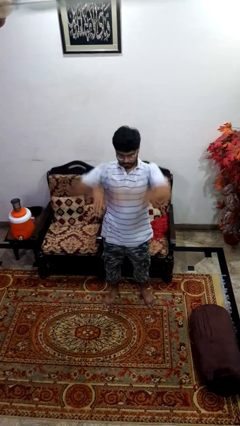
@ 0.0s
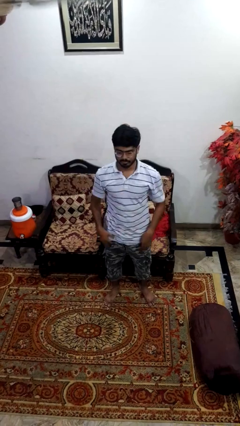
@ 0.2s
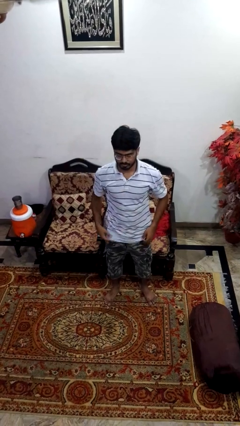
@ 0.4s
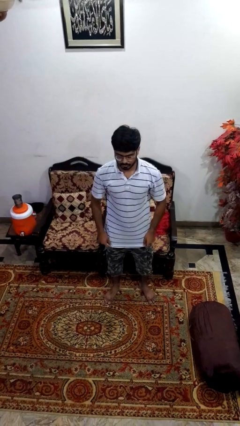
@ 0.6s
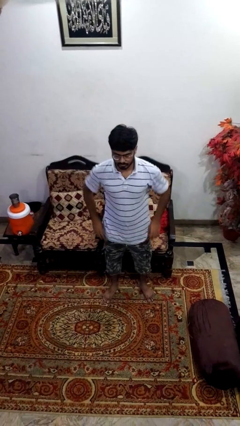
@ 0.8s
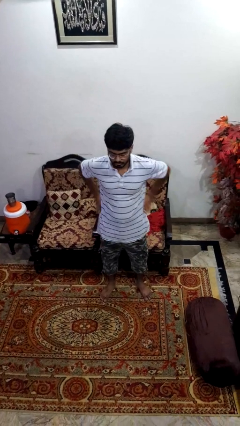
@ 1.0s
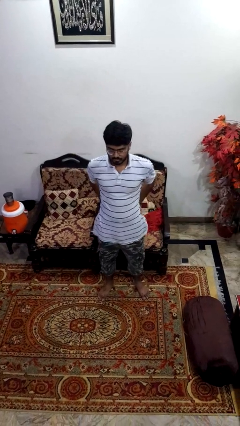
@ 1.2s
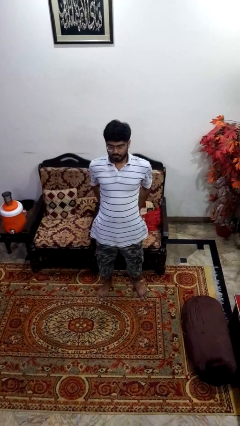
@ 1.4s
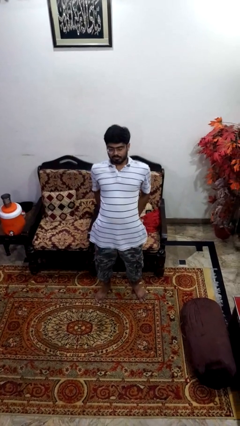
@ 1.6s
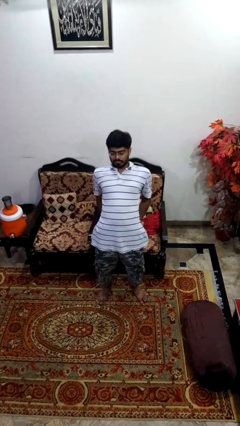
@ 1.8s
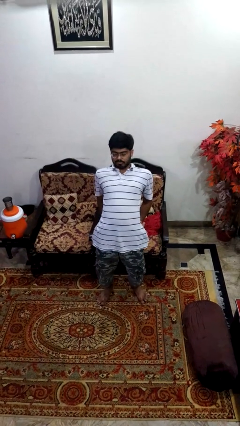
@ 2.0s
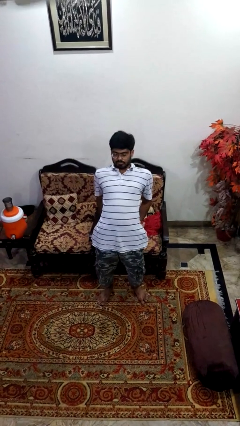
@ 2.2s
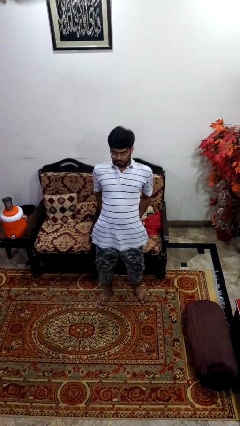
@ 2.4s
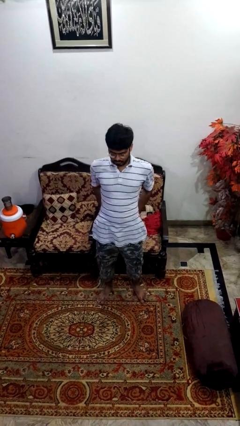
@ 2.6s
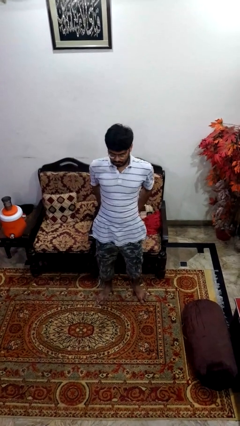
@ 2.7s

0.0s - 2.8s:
person stretches back

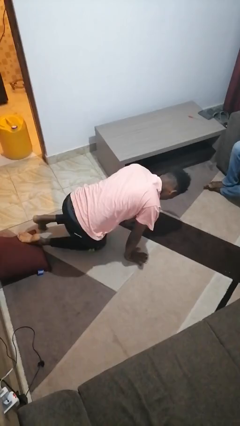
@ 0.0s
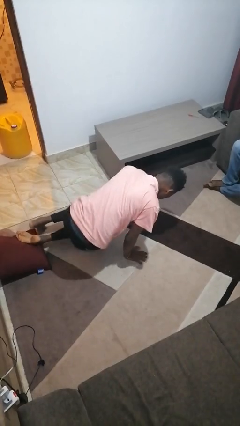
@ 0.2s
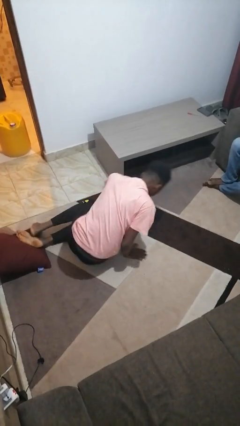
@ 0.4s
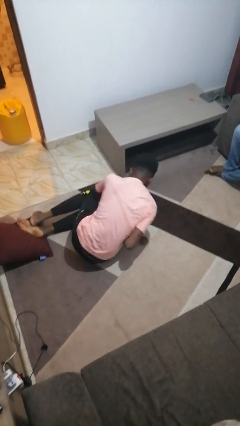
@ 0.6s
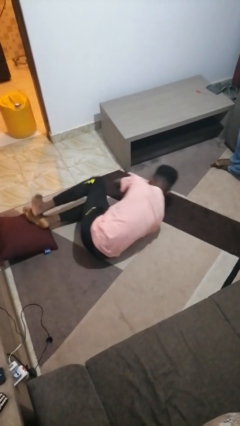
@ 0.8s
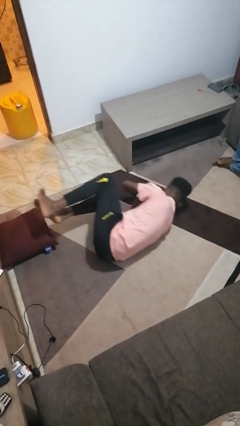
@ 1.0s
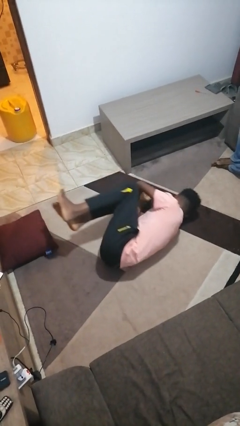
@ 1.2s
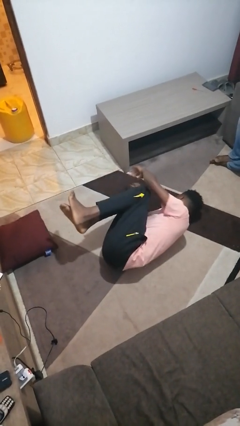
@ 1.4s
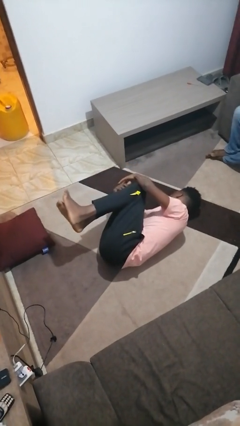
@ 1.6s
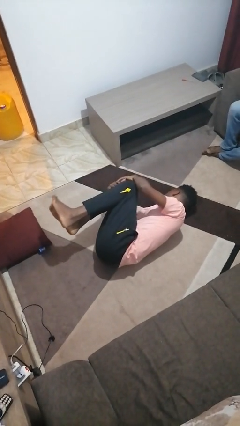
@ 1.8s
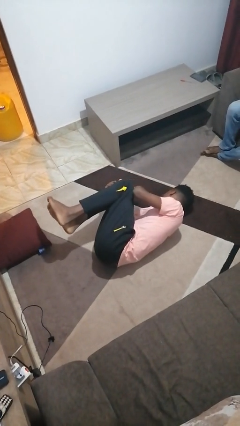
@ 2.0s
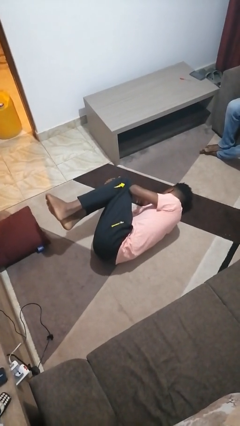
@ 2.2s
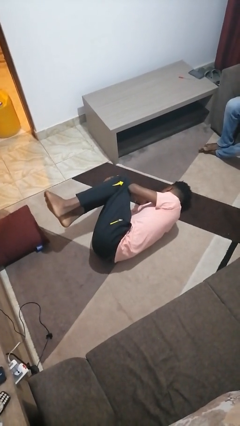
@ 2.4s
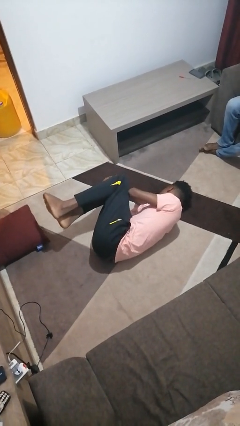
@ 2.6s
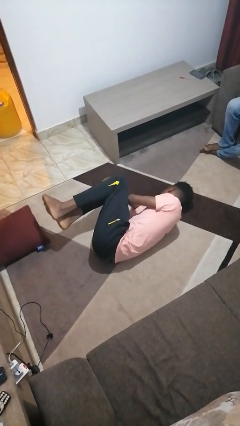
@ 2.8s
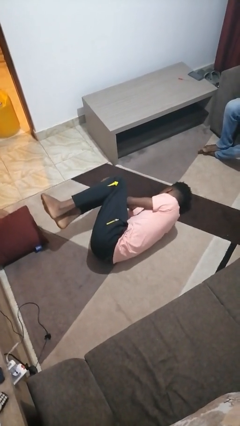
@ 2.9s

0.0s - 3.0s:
person lies down on floor

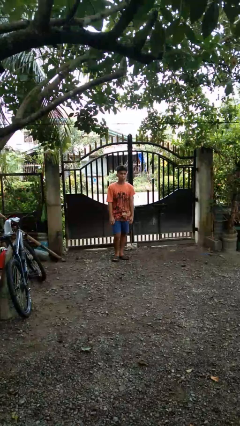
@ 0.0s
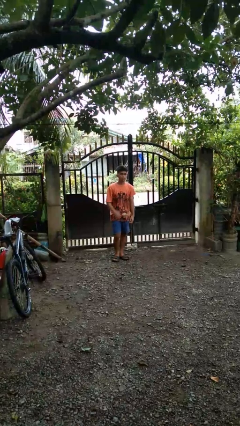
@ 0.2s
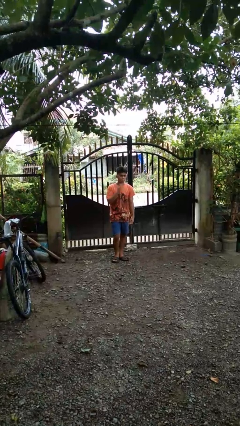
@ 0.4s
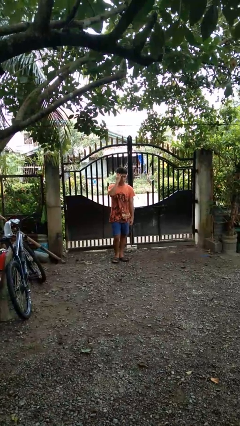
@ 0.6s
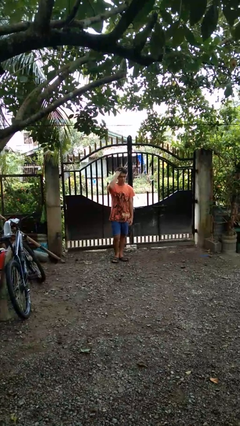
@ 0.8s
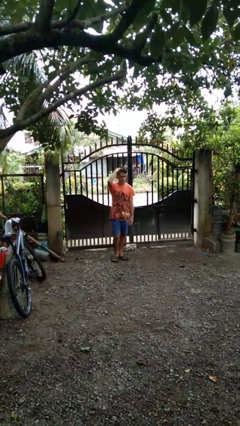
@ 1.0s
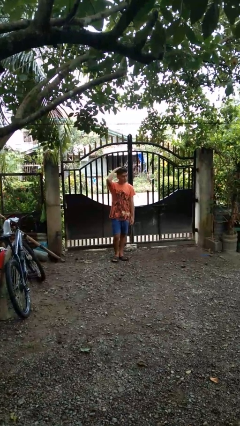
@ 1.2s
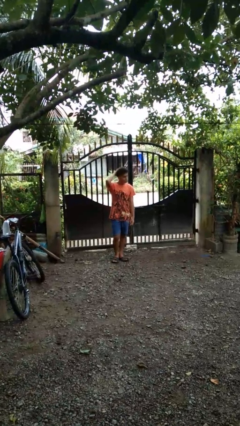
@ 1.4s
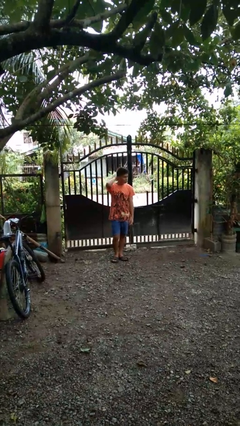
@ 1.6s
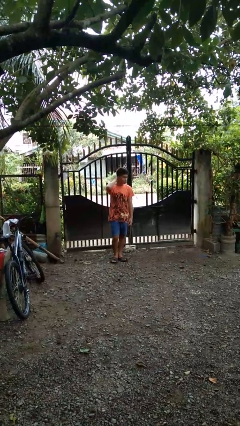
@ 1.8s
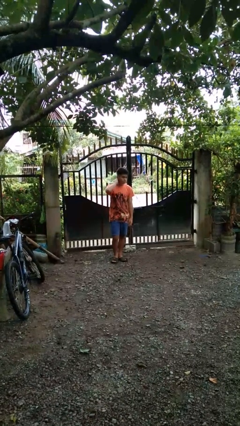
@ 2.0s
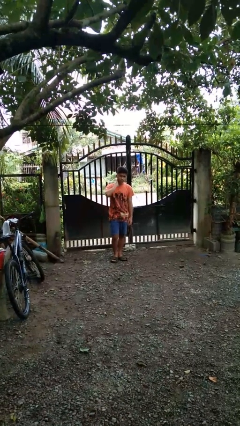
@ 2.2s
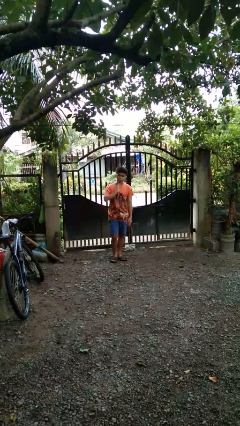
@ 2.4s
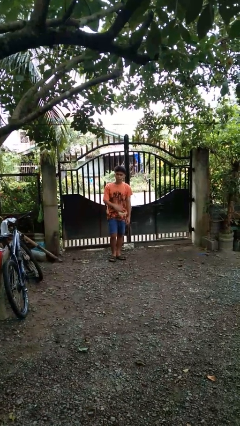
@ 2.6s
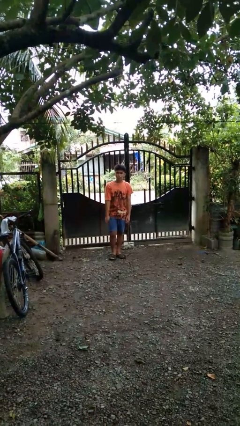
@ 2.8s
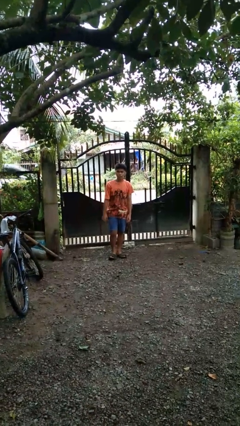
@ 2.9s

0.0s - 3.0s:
person strokes hair

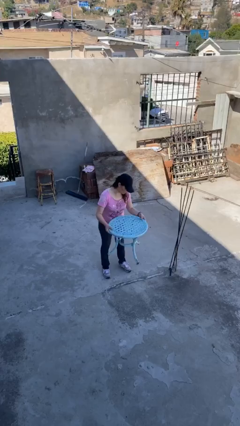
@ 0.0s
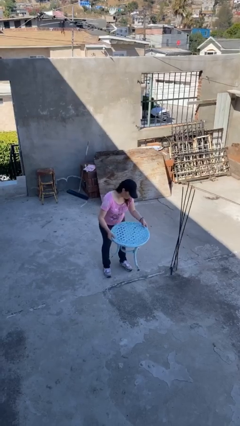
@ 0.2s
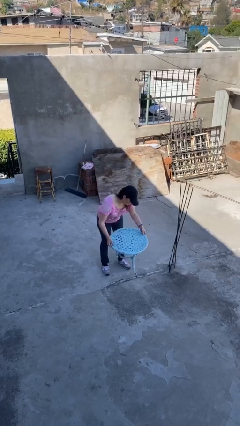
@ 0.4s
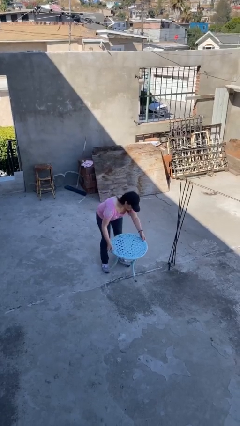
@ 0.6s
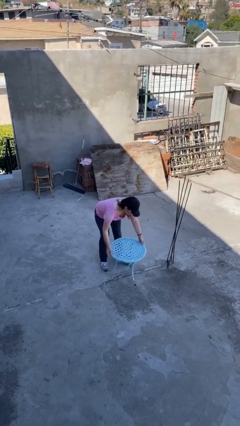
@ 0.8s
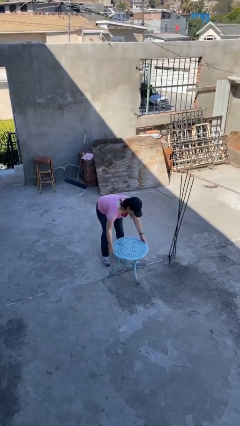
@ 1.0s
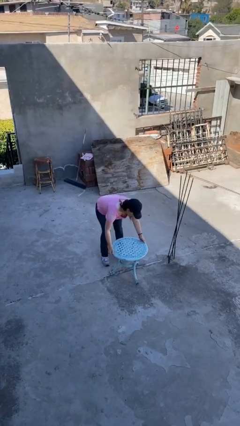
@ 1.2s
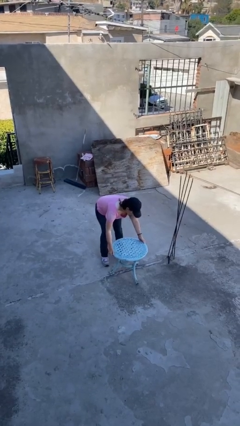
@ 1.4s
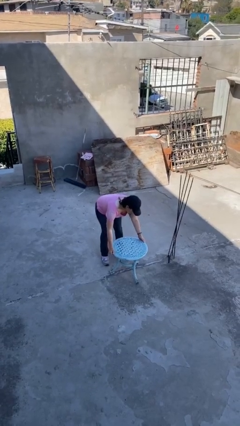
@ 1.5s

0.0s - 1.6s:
person puts down object on floor

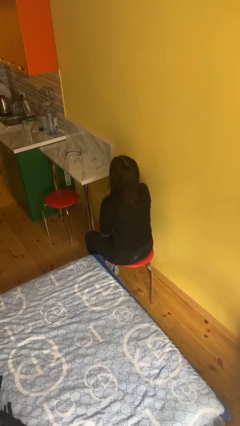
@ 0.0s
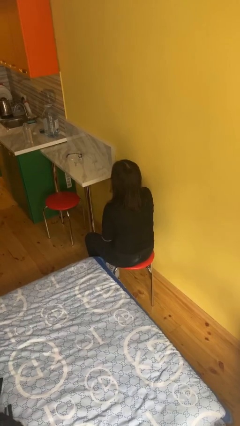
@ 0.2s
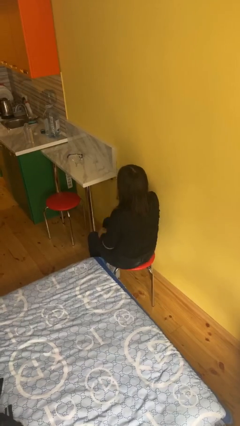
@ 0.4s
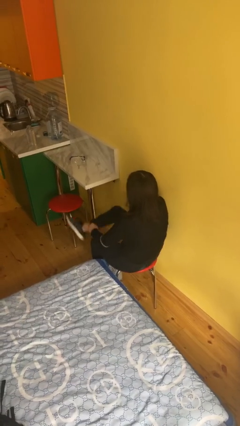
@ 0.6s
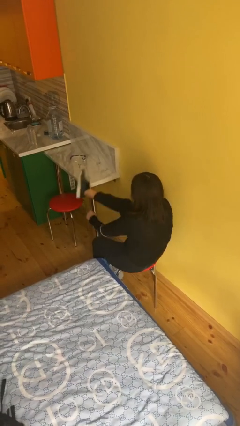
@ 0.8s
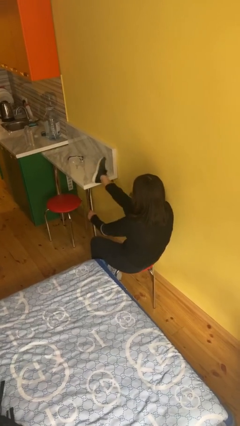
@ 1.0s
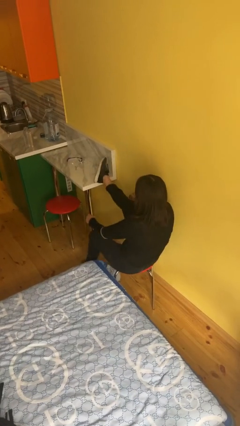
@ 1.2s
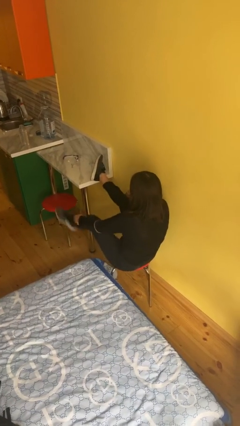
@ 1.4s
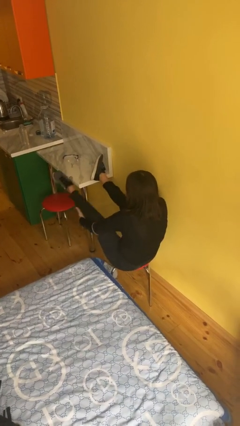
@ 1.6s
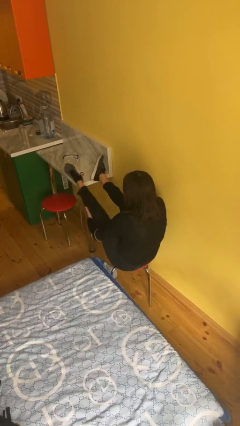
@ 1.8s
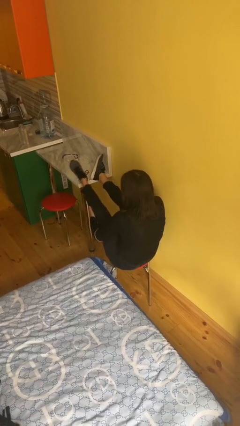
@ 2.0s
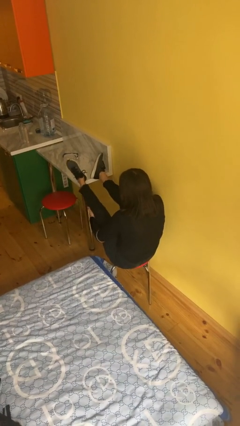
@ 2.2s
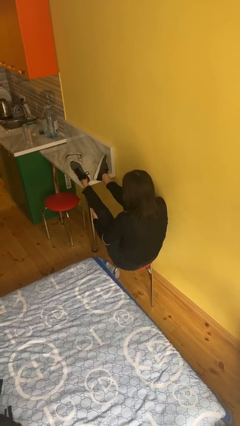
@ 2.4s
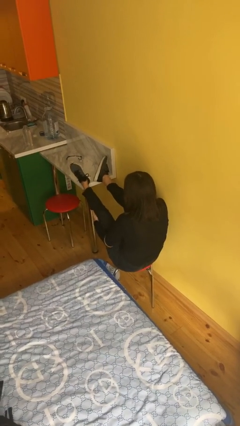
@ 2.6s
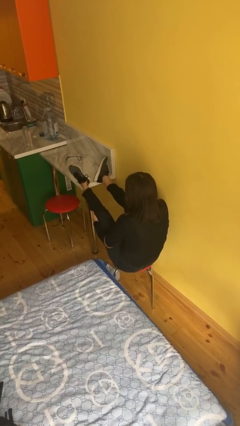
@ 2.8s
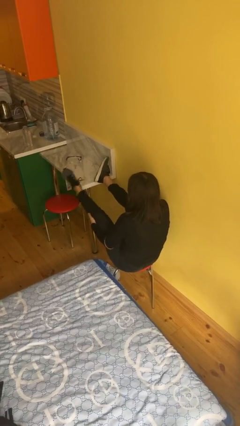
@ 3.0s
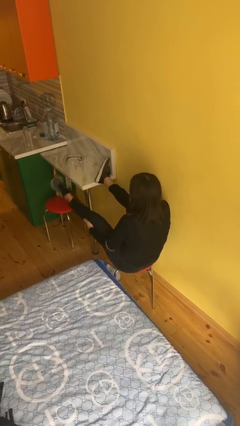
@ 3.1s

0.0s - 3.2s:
person puts feet up

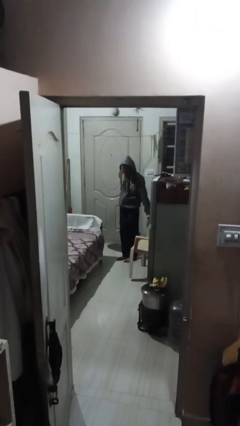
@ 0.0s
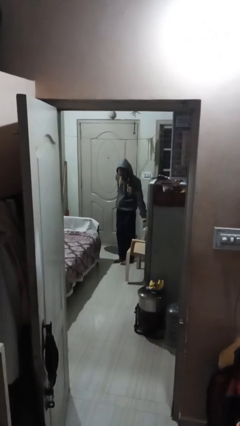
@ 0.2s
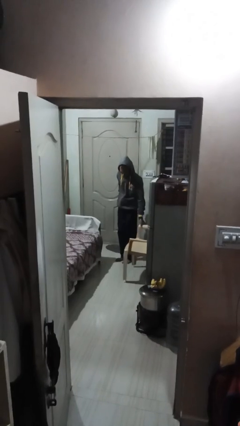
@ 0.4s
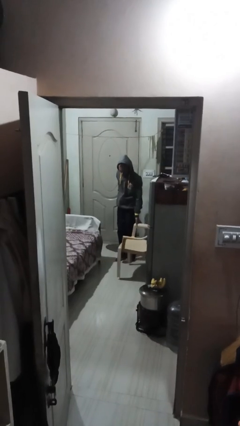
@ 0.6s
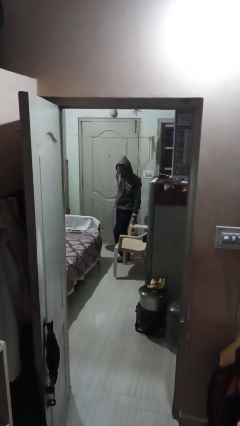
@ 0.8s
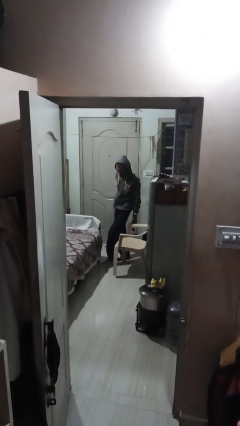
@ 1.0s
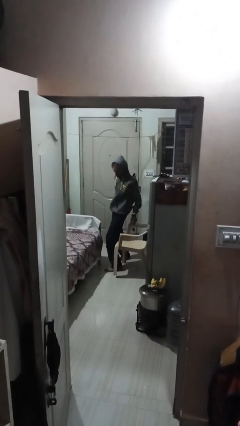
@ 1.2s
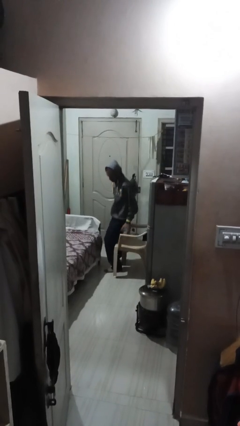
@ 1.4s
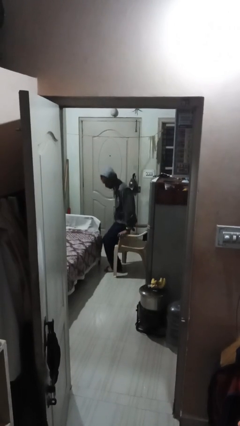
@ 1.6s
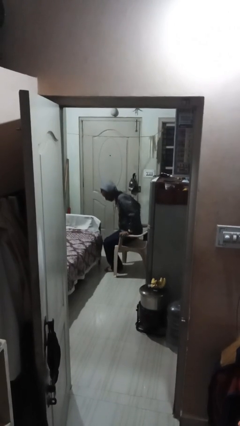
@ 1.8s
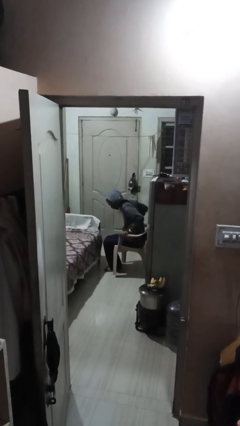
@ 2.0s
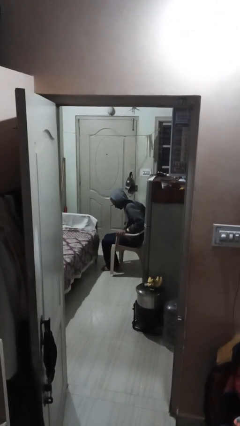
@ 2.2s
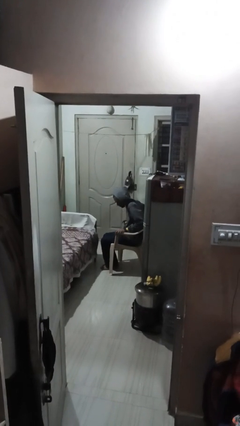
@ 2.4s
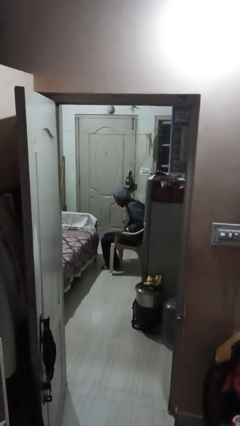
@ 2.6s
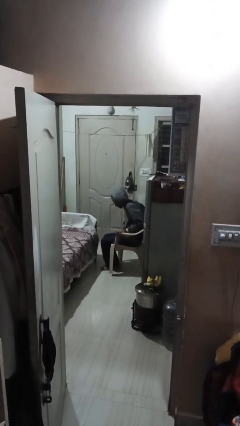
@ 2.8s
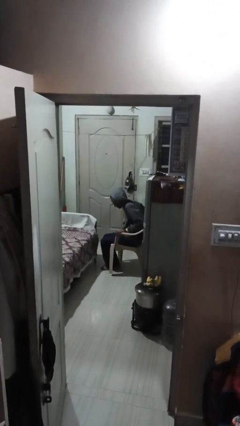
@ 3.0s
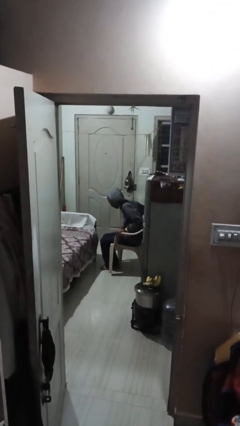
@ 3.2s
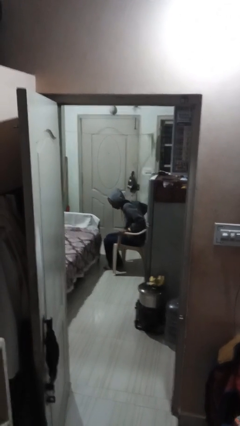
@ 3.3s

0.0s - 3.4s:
person sits down

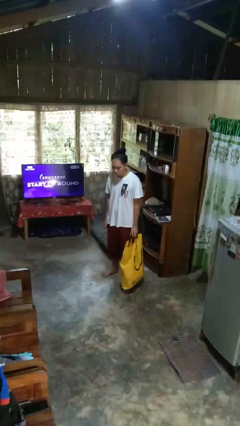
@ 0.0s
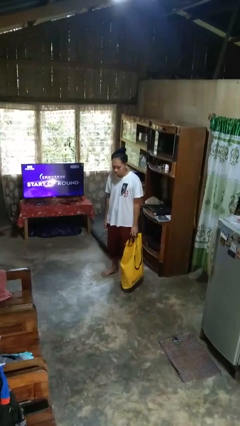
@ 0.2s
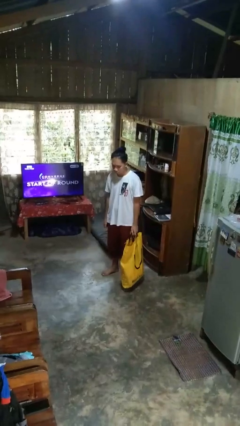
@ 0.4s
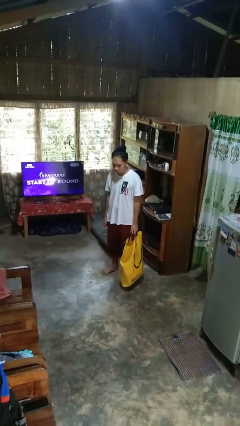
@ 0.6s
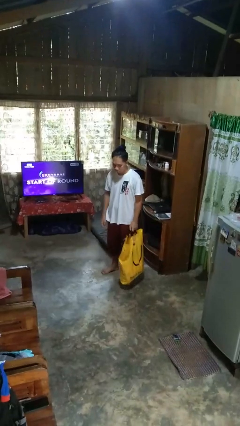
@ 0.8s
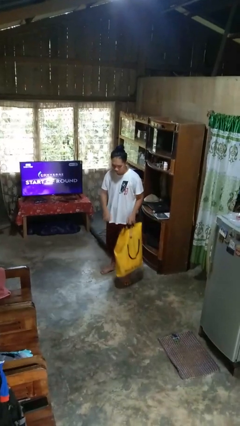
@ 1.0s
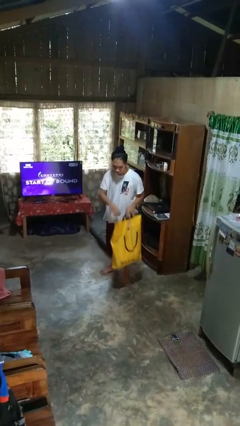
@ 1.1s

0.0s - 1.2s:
person searches in bag
